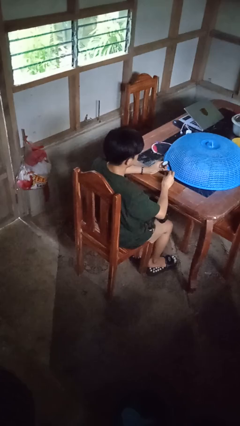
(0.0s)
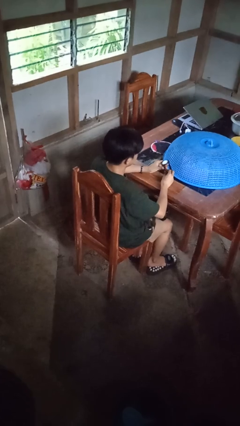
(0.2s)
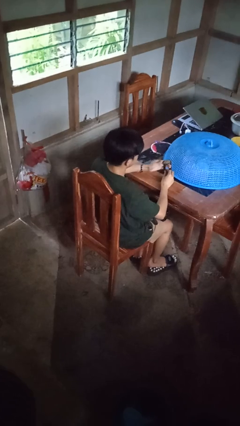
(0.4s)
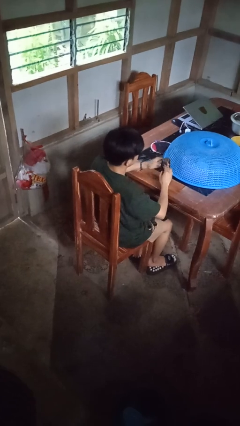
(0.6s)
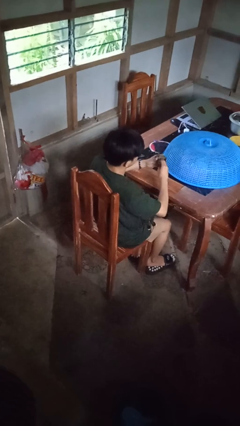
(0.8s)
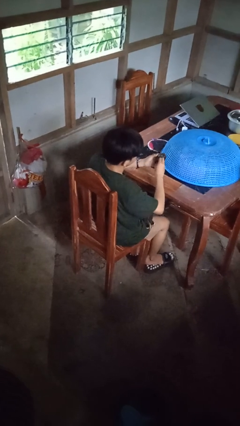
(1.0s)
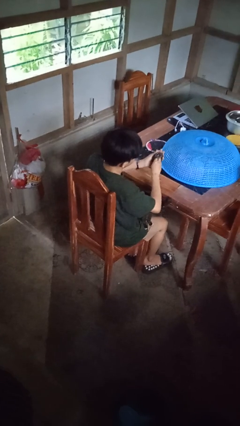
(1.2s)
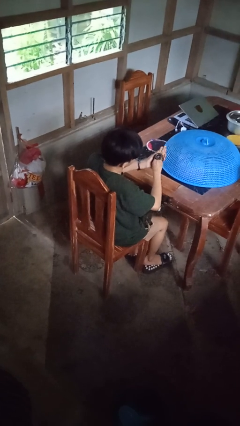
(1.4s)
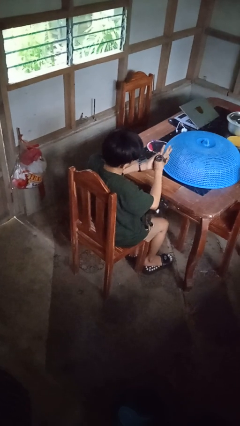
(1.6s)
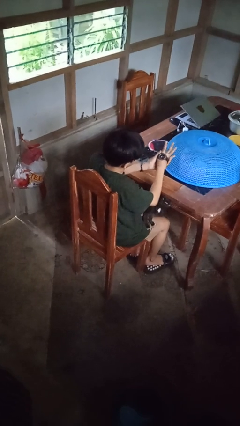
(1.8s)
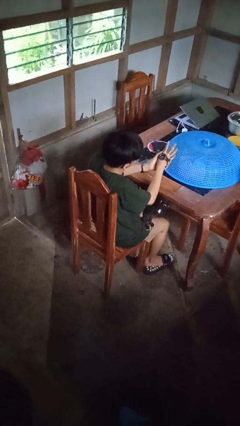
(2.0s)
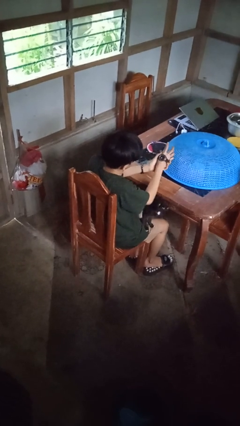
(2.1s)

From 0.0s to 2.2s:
person puts on wristwatch

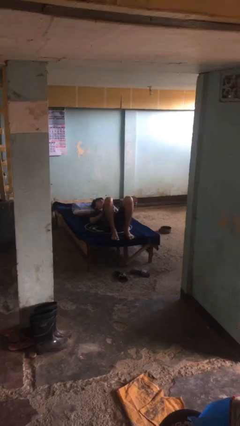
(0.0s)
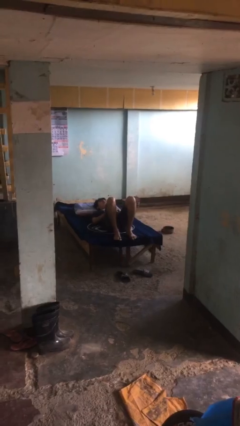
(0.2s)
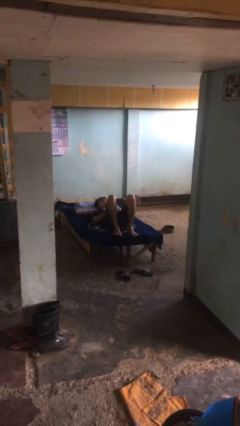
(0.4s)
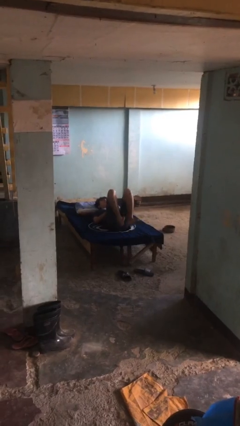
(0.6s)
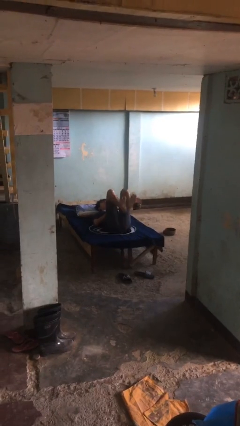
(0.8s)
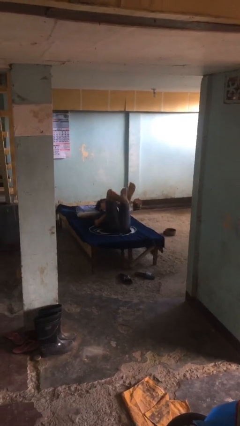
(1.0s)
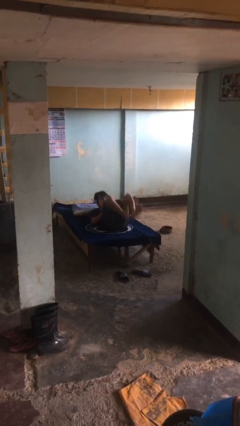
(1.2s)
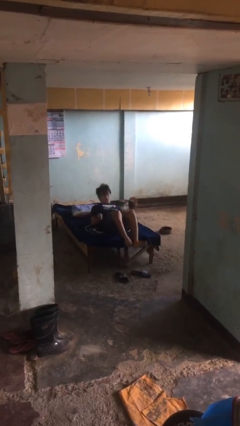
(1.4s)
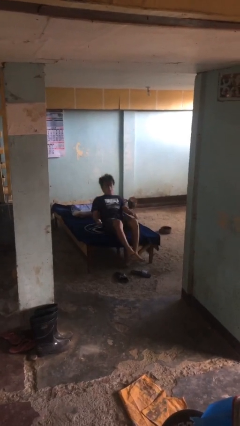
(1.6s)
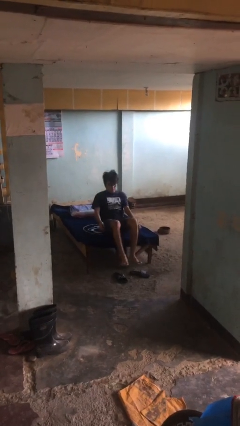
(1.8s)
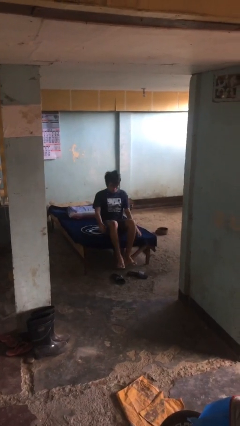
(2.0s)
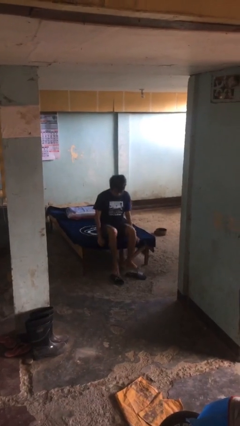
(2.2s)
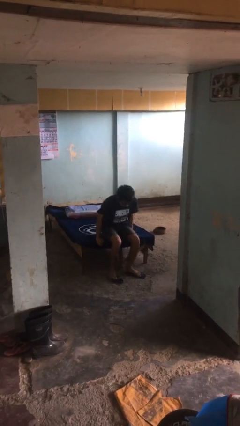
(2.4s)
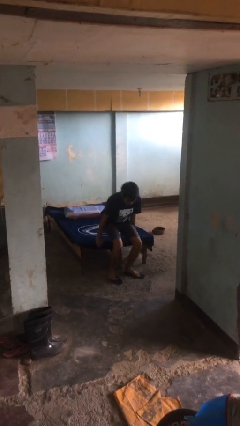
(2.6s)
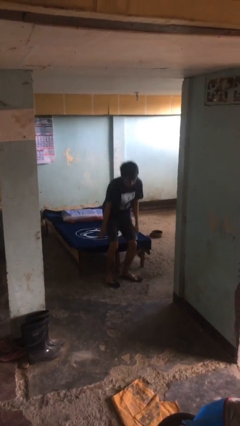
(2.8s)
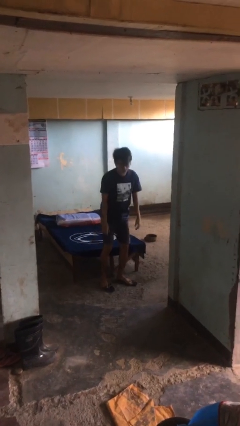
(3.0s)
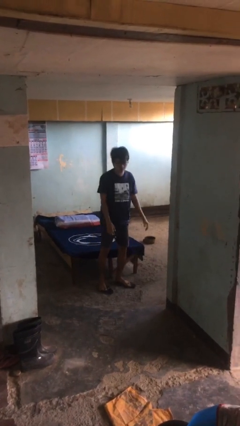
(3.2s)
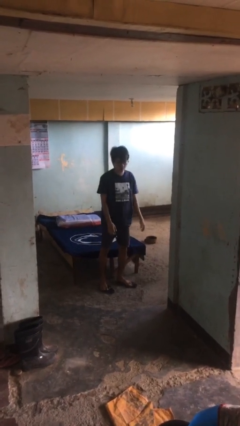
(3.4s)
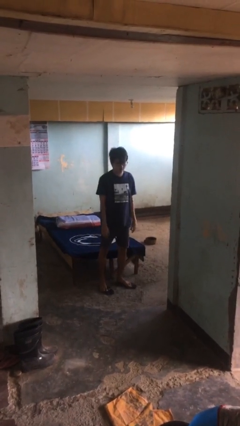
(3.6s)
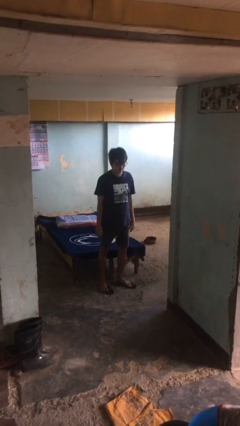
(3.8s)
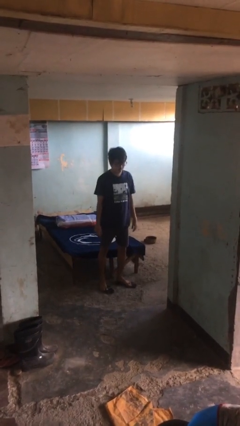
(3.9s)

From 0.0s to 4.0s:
person stands up

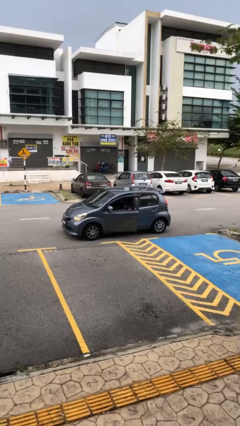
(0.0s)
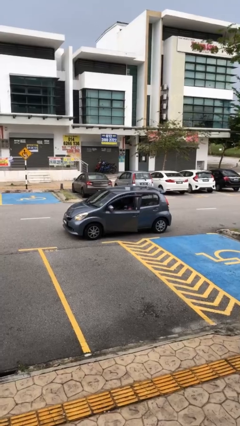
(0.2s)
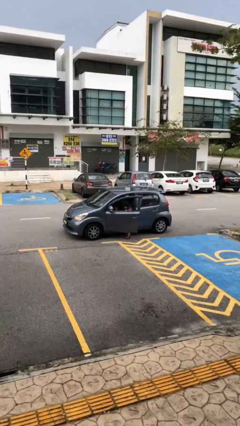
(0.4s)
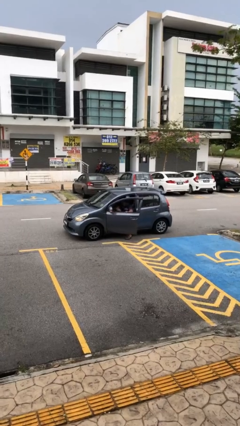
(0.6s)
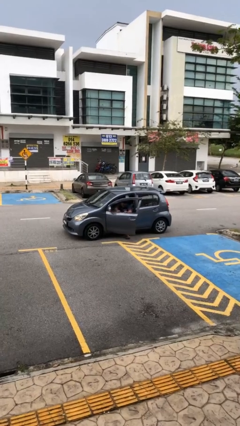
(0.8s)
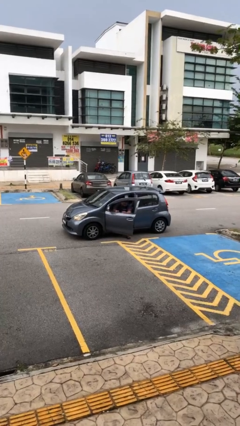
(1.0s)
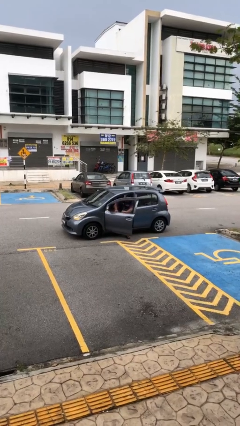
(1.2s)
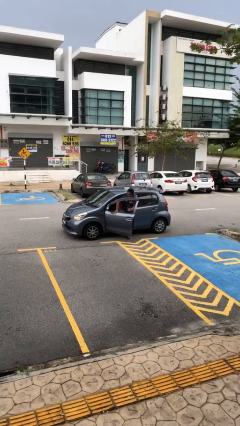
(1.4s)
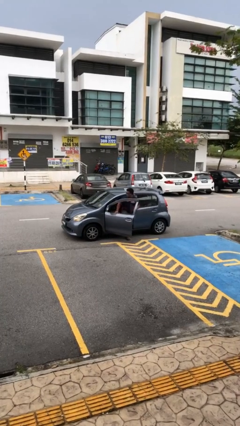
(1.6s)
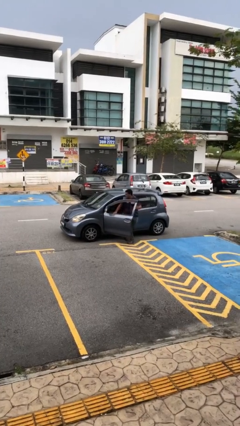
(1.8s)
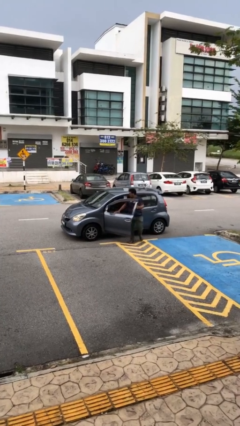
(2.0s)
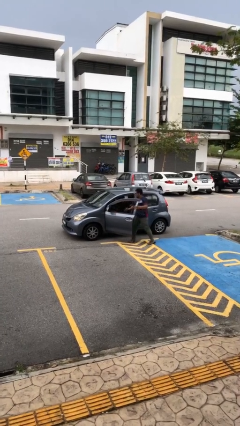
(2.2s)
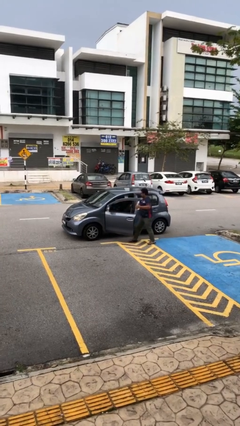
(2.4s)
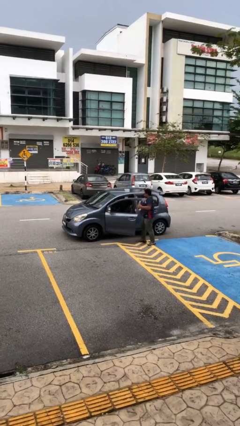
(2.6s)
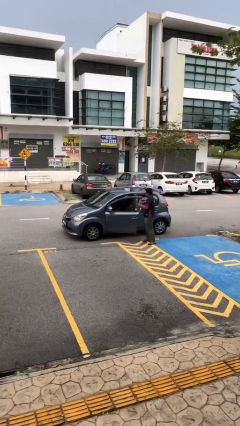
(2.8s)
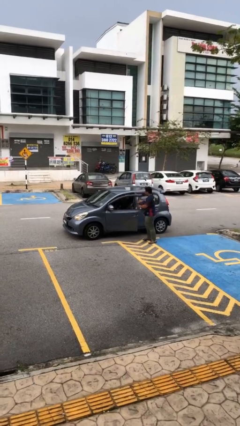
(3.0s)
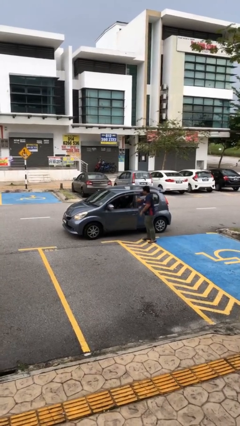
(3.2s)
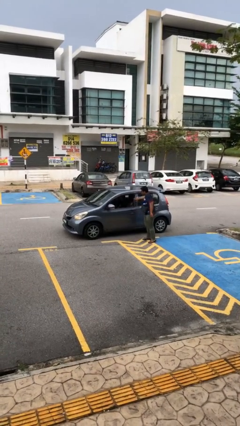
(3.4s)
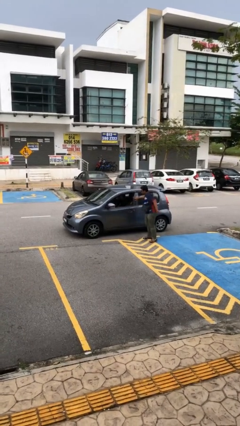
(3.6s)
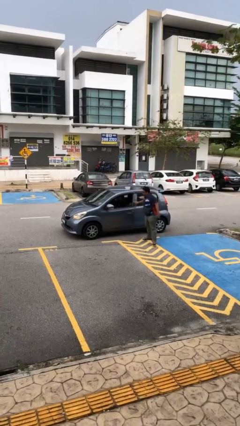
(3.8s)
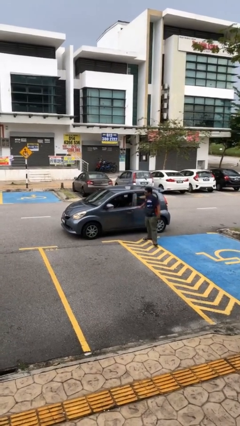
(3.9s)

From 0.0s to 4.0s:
car drops off person

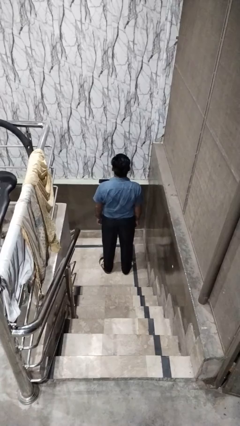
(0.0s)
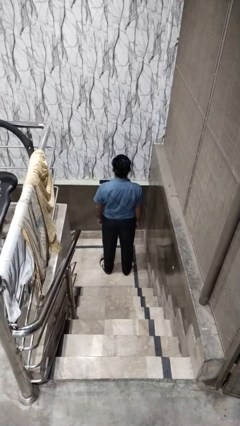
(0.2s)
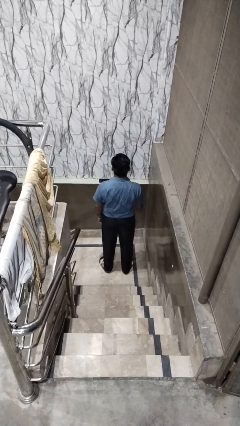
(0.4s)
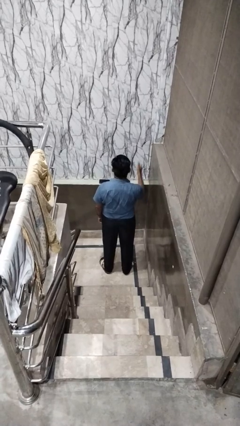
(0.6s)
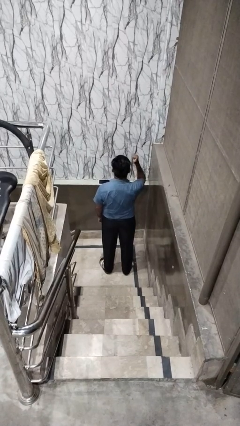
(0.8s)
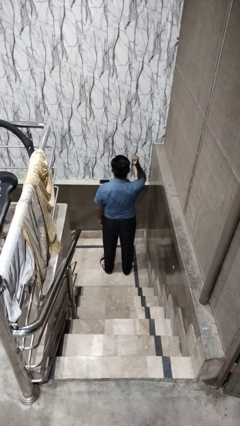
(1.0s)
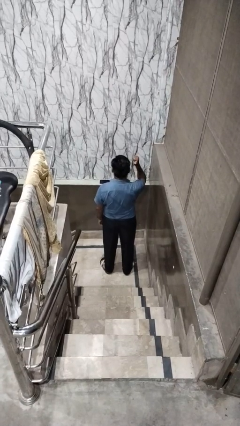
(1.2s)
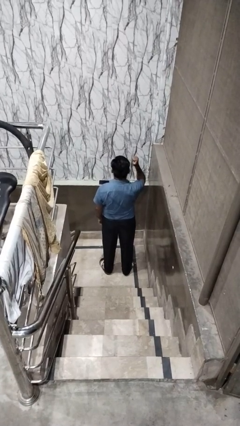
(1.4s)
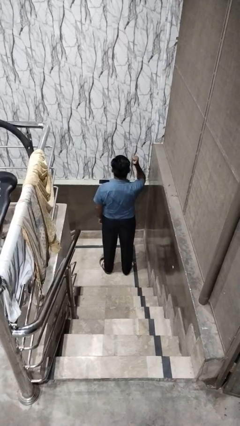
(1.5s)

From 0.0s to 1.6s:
person gestures behind me

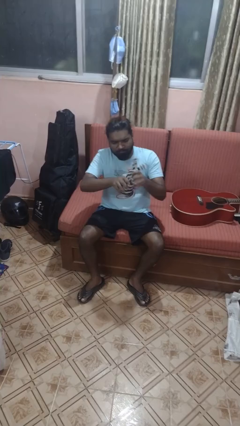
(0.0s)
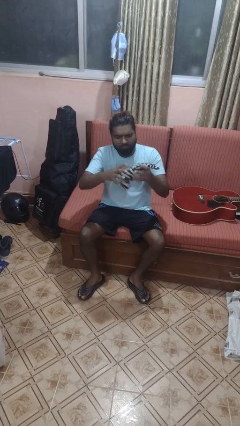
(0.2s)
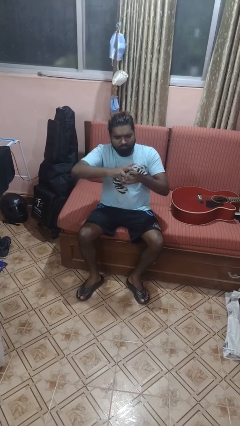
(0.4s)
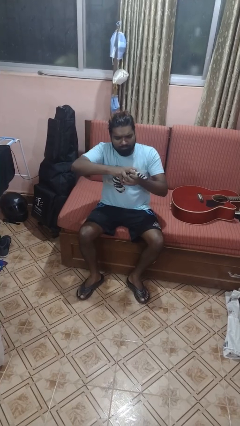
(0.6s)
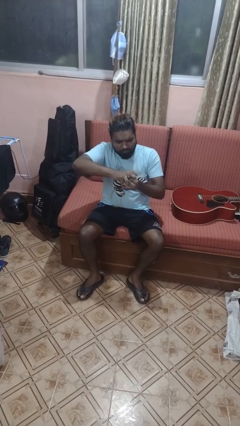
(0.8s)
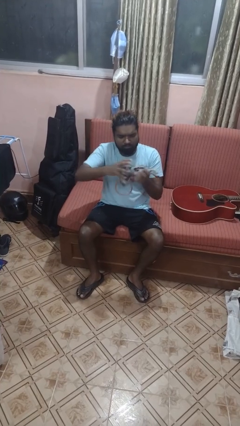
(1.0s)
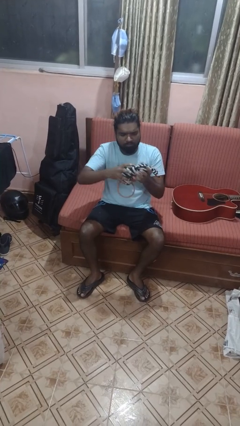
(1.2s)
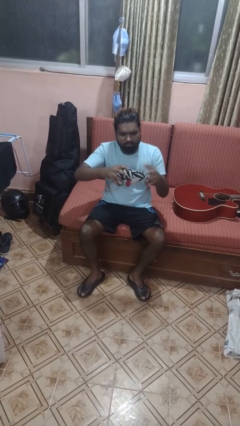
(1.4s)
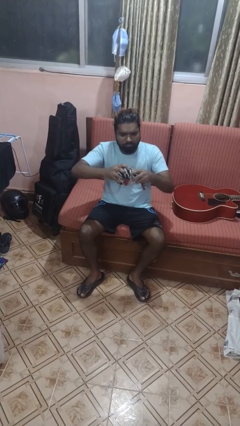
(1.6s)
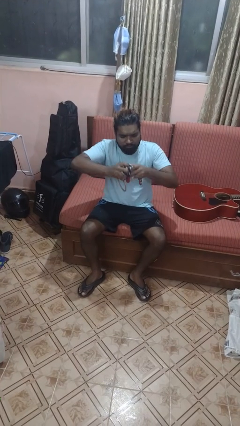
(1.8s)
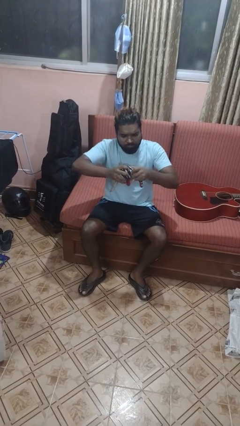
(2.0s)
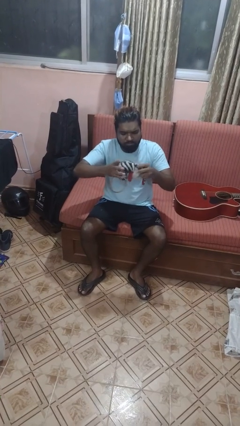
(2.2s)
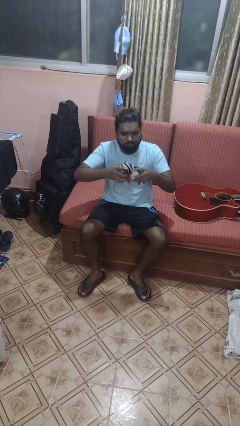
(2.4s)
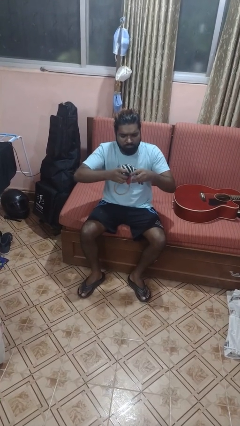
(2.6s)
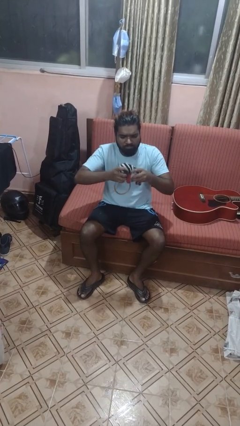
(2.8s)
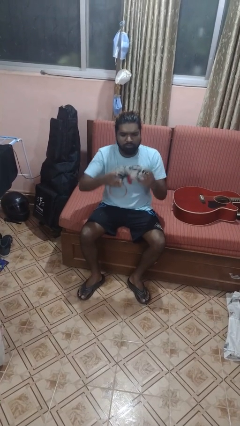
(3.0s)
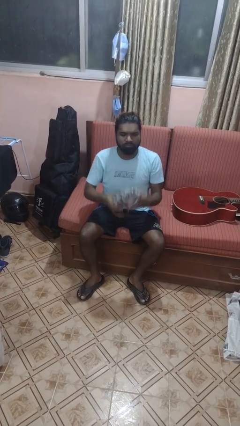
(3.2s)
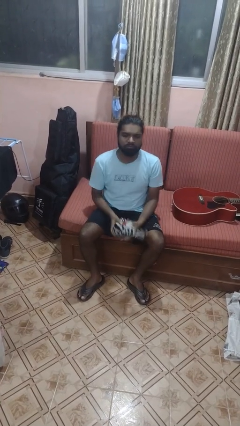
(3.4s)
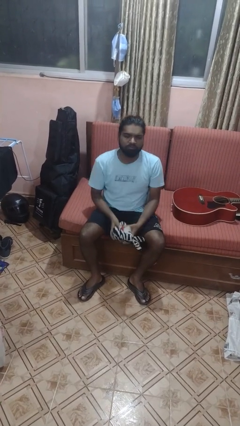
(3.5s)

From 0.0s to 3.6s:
person squeezes object

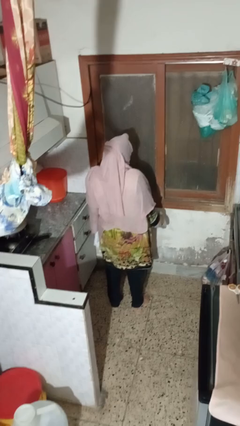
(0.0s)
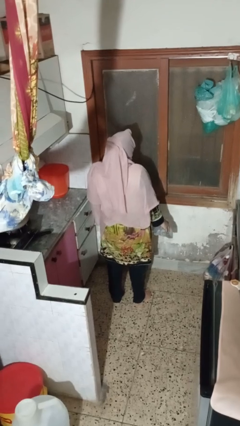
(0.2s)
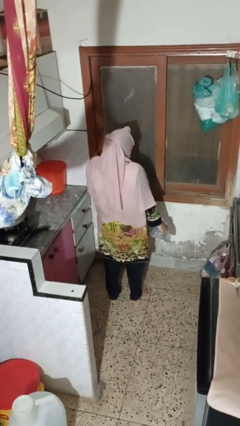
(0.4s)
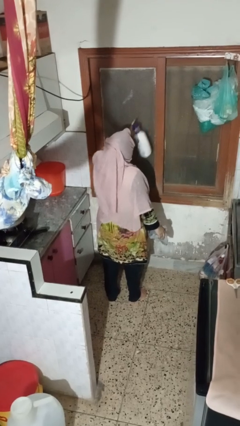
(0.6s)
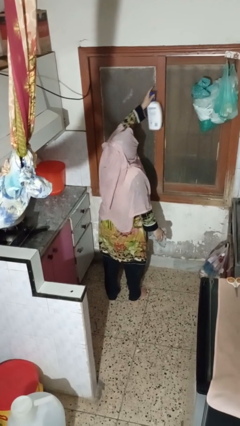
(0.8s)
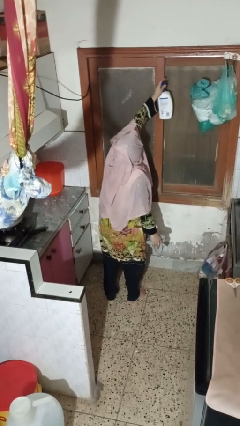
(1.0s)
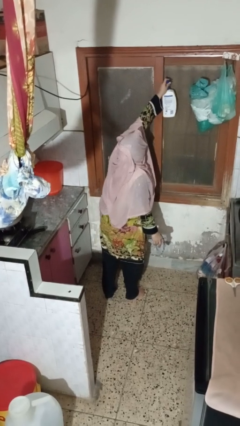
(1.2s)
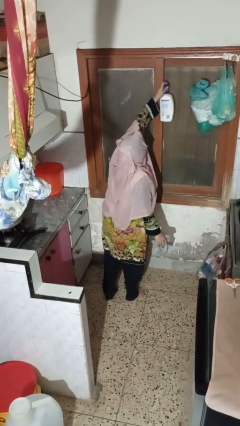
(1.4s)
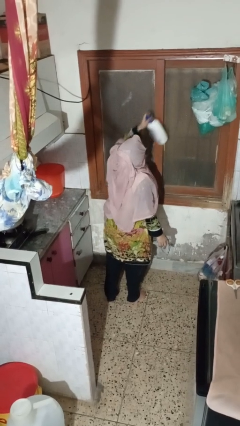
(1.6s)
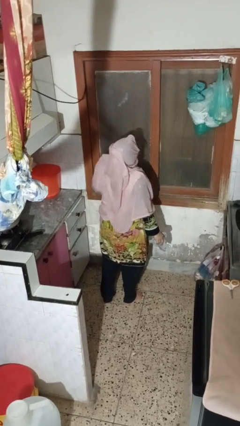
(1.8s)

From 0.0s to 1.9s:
person sprays from bottle

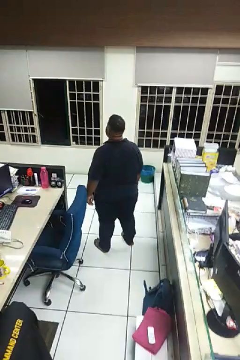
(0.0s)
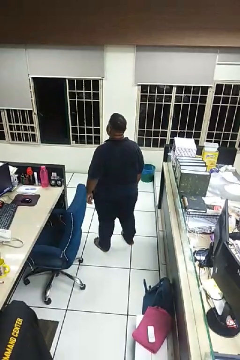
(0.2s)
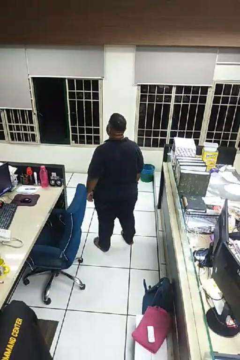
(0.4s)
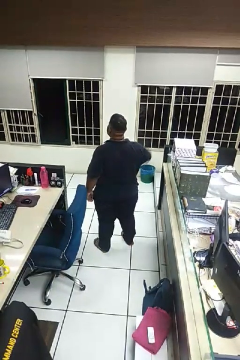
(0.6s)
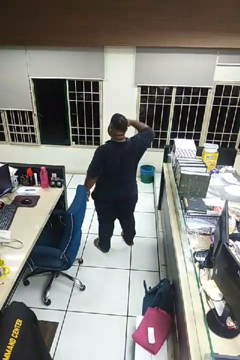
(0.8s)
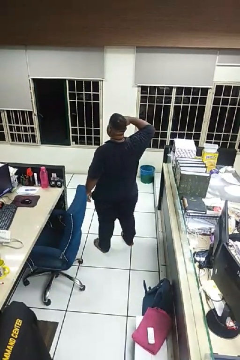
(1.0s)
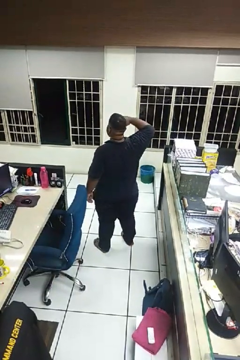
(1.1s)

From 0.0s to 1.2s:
person salutes
